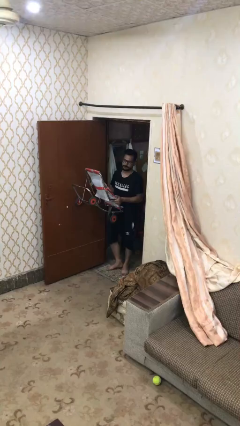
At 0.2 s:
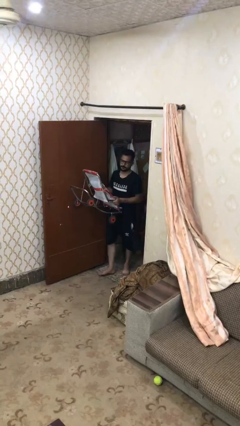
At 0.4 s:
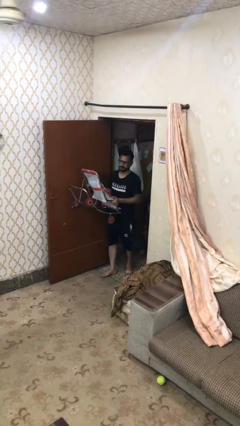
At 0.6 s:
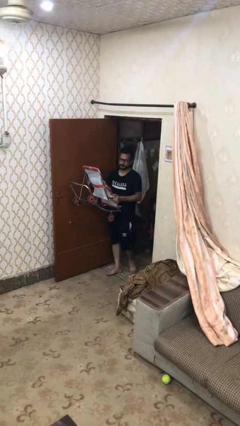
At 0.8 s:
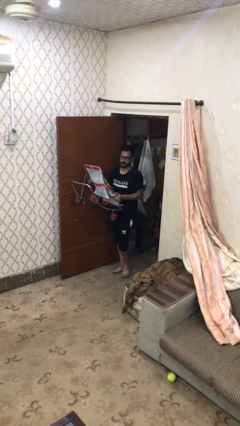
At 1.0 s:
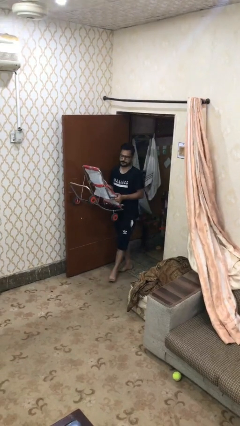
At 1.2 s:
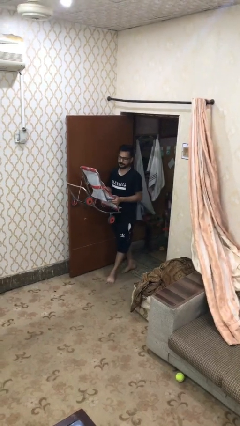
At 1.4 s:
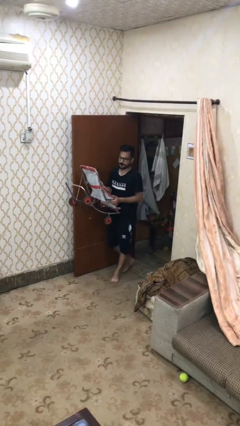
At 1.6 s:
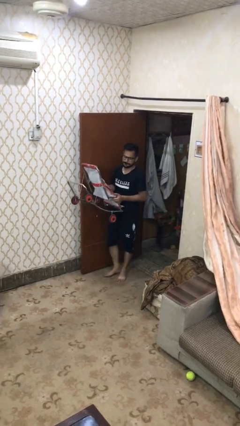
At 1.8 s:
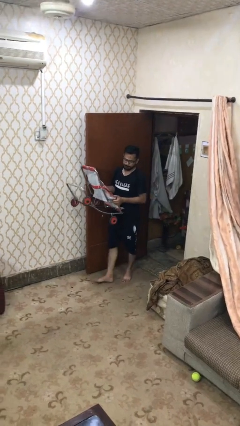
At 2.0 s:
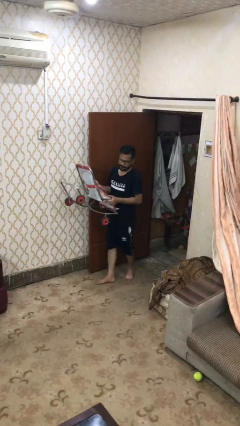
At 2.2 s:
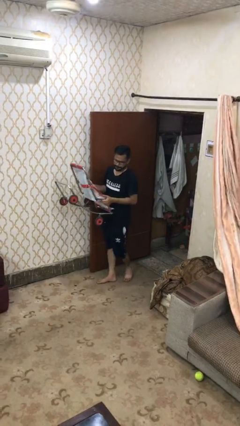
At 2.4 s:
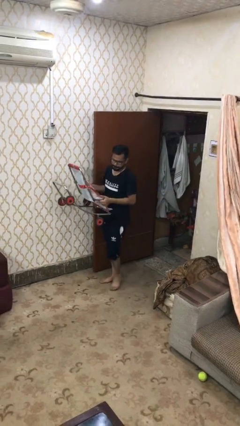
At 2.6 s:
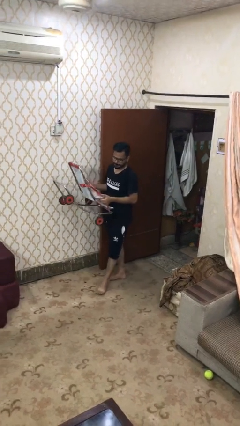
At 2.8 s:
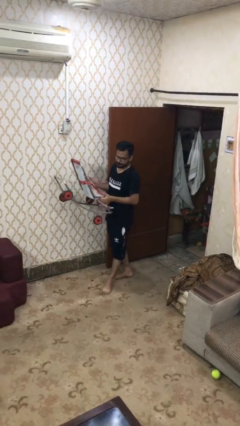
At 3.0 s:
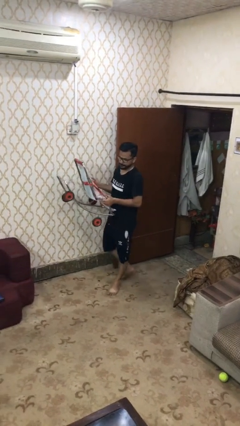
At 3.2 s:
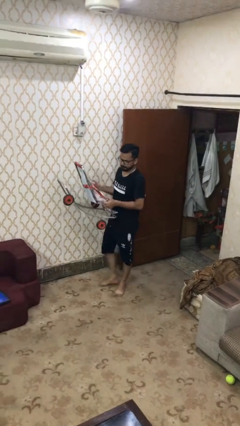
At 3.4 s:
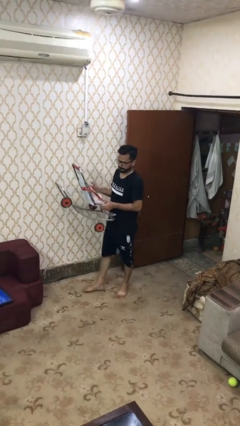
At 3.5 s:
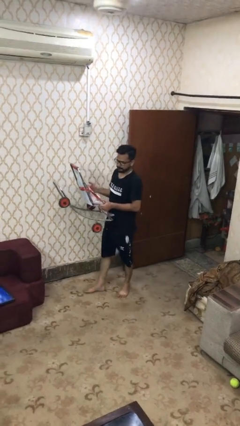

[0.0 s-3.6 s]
person carries heavy object

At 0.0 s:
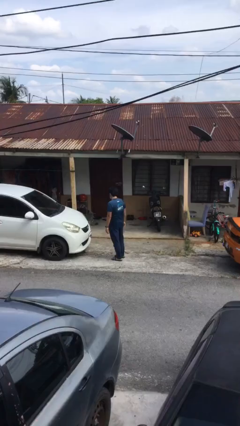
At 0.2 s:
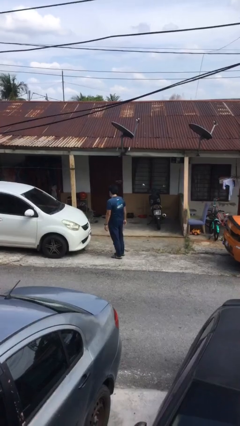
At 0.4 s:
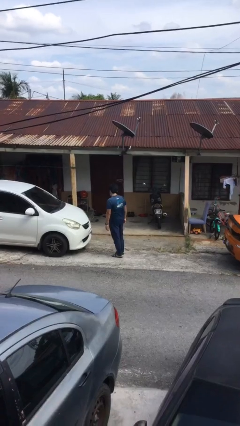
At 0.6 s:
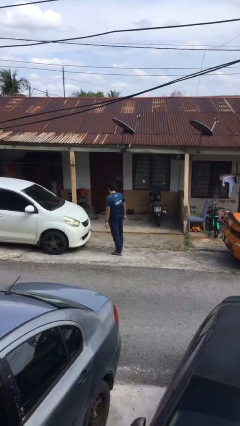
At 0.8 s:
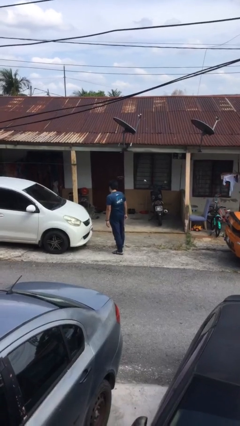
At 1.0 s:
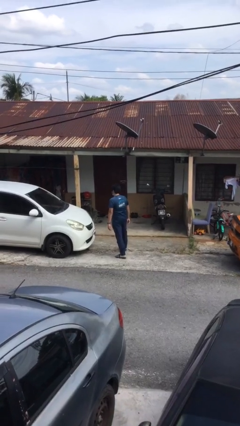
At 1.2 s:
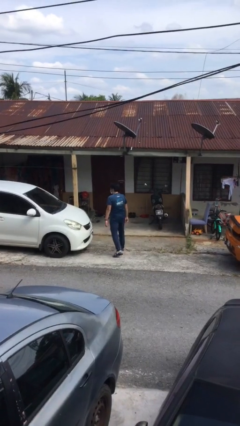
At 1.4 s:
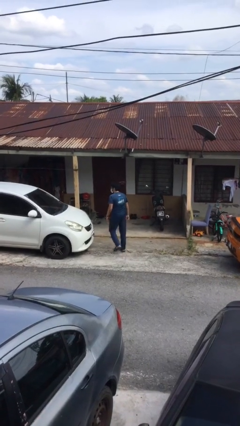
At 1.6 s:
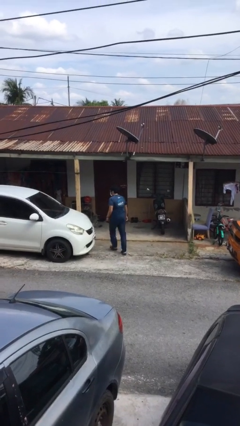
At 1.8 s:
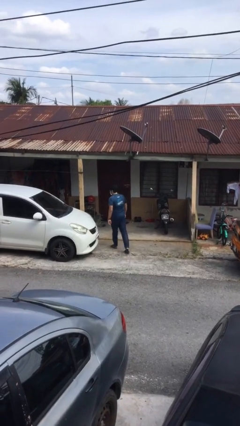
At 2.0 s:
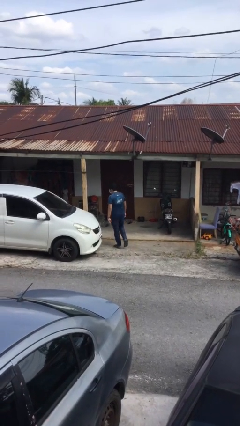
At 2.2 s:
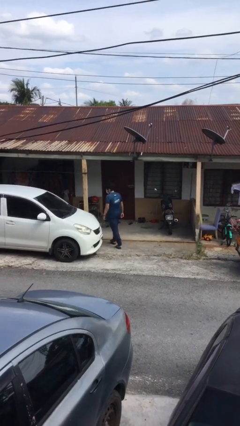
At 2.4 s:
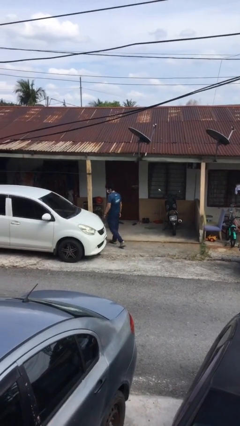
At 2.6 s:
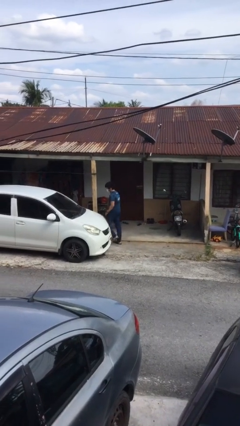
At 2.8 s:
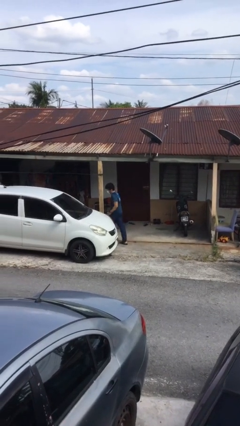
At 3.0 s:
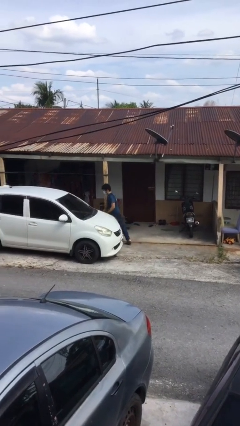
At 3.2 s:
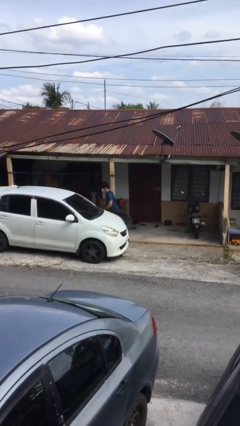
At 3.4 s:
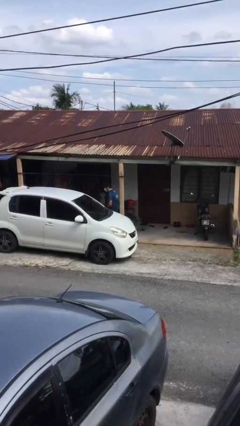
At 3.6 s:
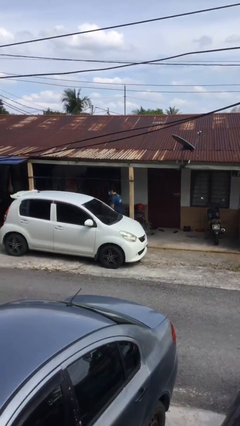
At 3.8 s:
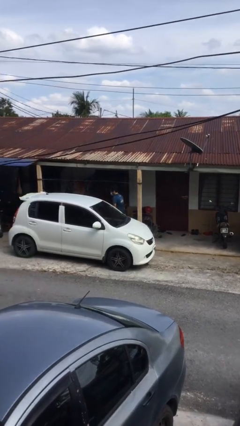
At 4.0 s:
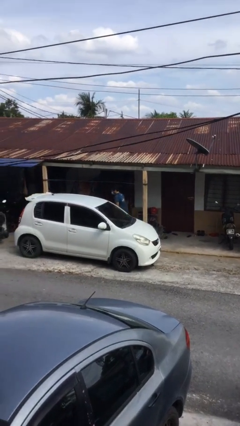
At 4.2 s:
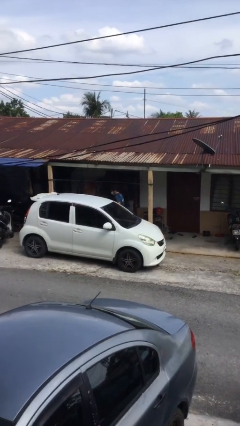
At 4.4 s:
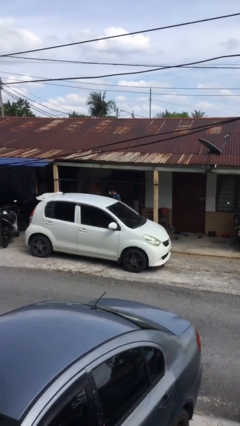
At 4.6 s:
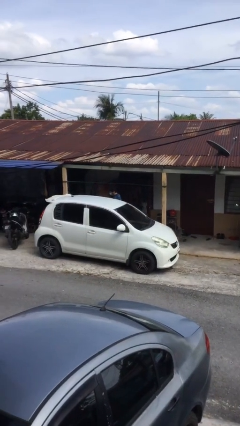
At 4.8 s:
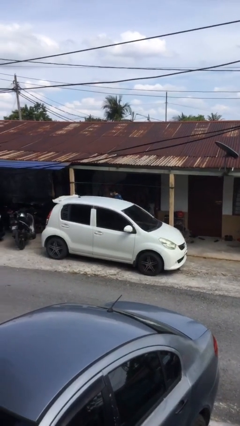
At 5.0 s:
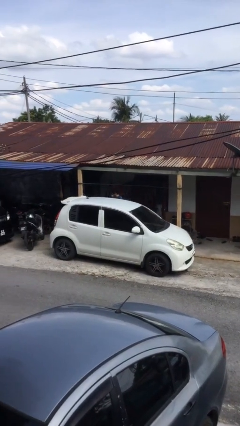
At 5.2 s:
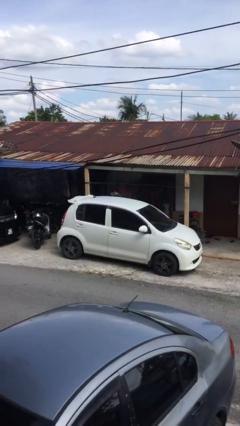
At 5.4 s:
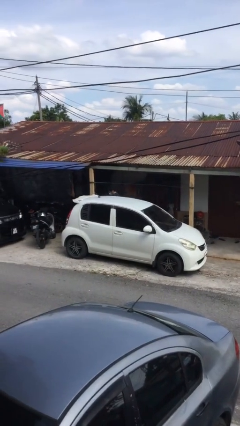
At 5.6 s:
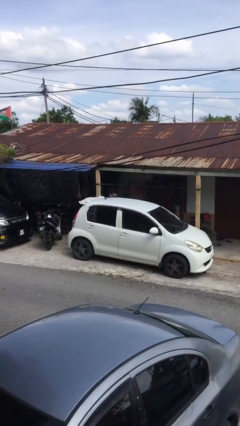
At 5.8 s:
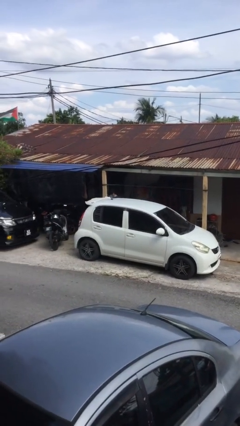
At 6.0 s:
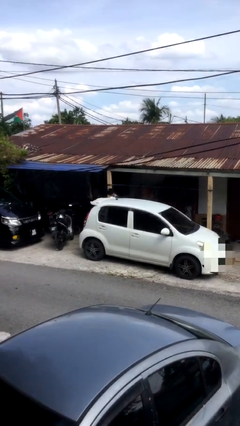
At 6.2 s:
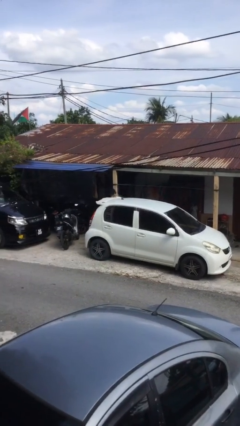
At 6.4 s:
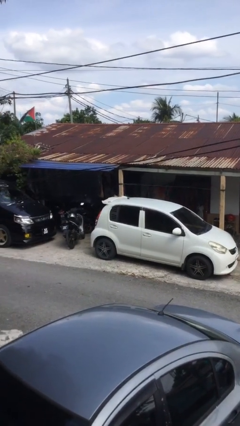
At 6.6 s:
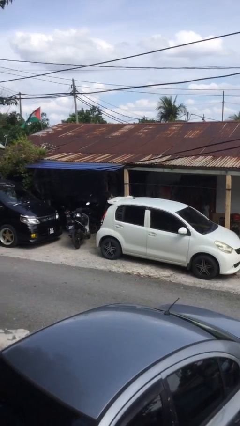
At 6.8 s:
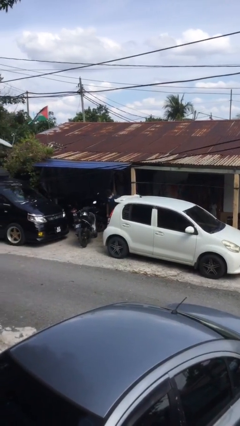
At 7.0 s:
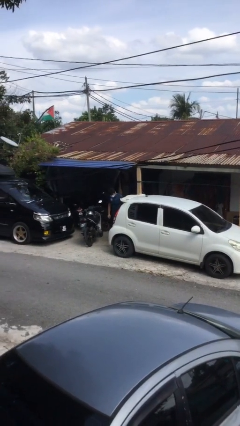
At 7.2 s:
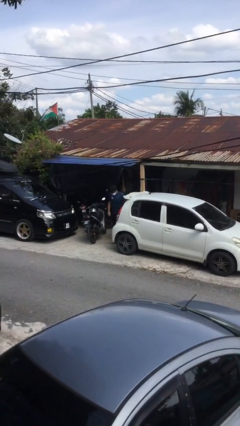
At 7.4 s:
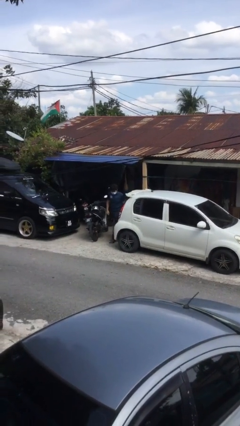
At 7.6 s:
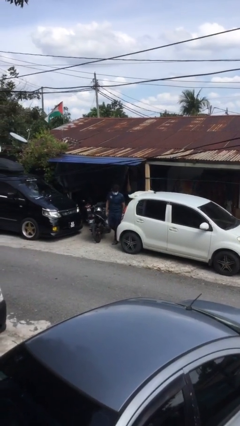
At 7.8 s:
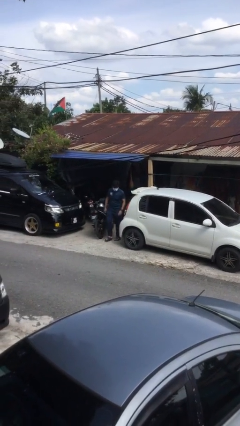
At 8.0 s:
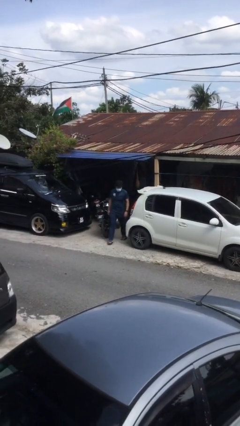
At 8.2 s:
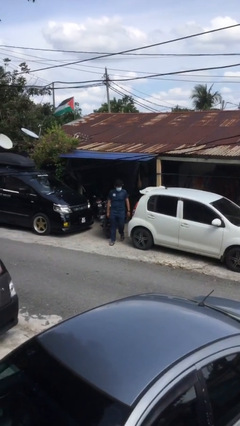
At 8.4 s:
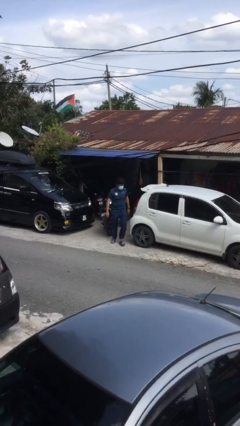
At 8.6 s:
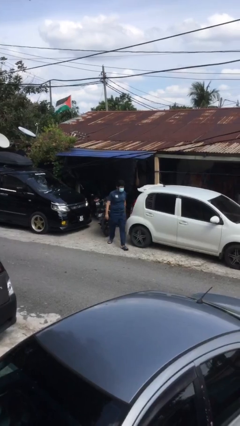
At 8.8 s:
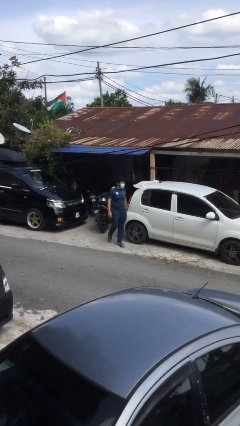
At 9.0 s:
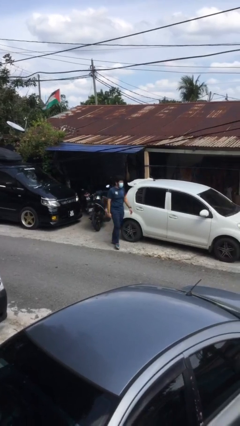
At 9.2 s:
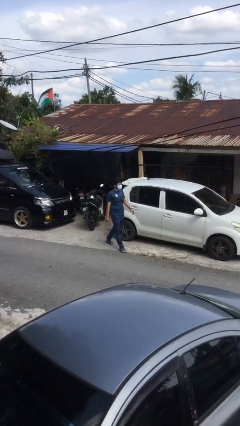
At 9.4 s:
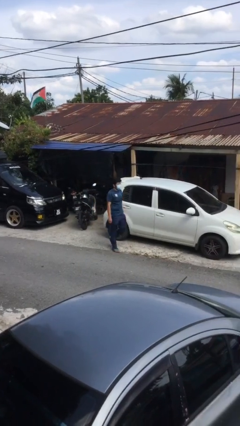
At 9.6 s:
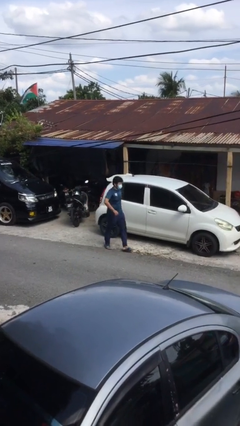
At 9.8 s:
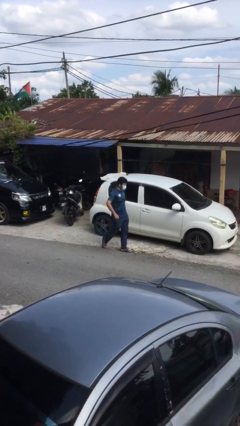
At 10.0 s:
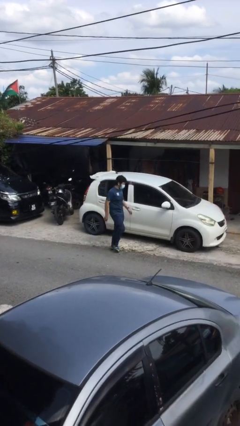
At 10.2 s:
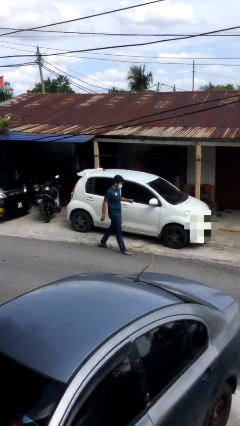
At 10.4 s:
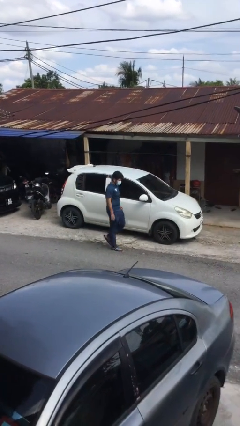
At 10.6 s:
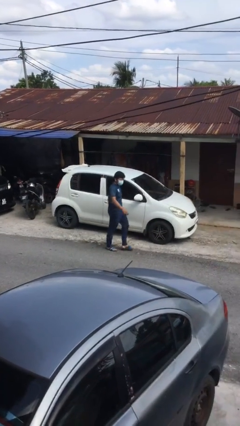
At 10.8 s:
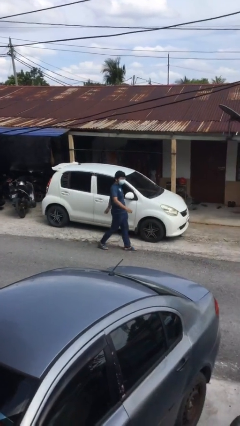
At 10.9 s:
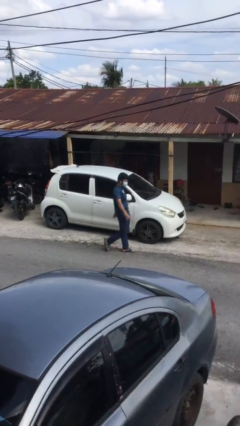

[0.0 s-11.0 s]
person walks around car

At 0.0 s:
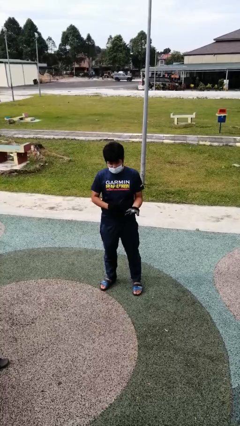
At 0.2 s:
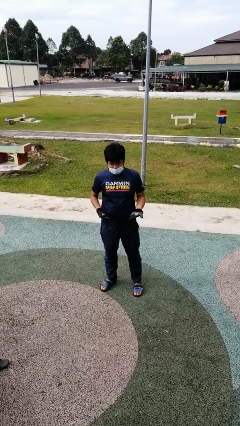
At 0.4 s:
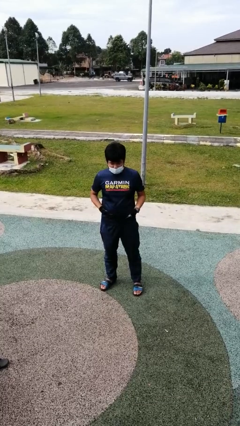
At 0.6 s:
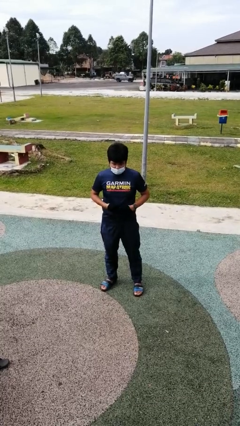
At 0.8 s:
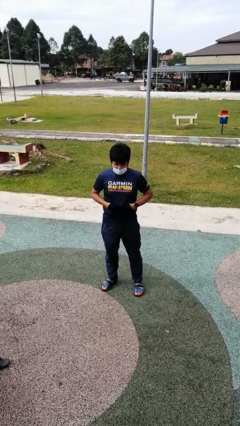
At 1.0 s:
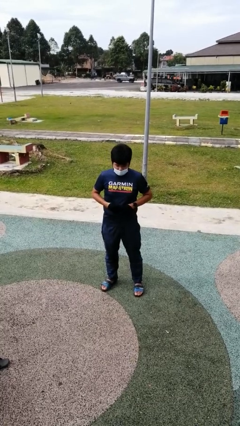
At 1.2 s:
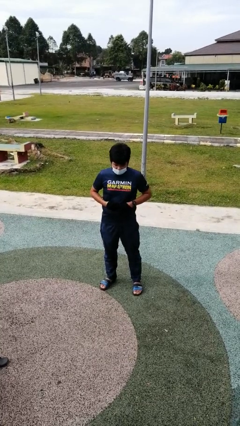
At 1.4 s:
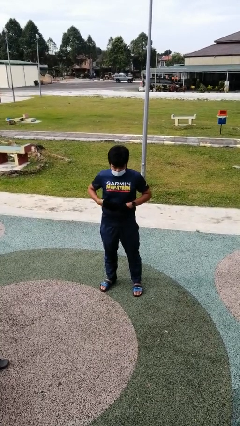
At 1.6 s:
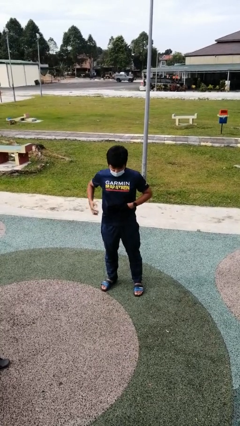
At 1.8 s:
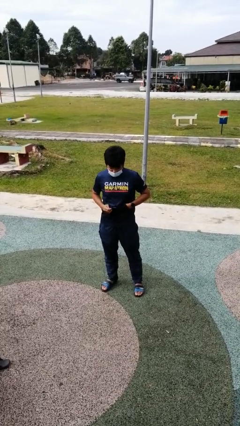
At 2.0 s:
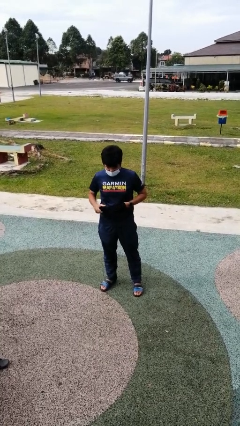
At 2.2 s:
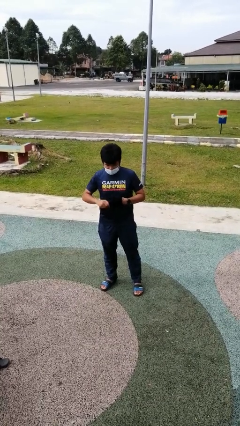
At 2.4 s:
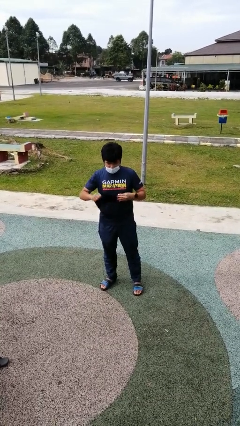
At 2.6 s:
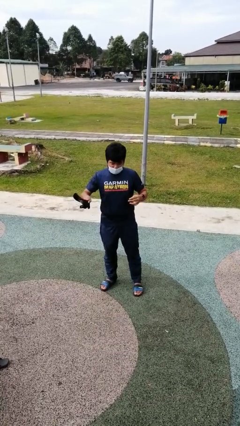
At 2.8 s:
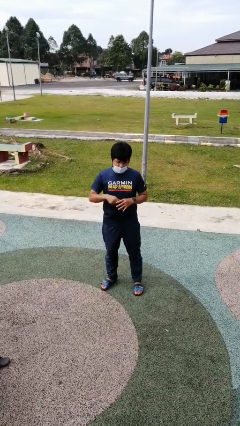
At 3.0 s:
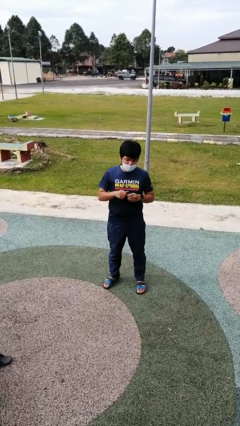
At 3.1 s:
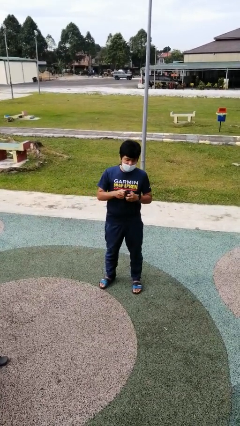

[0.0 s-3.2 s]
person takes off gloves
